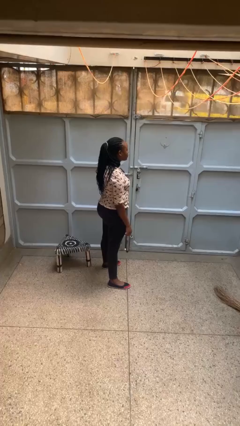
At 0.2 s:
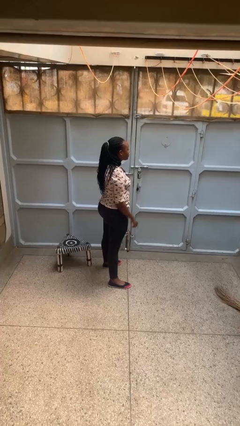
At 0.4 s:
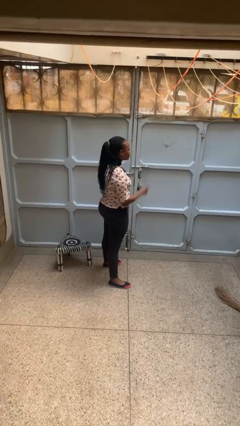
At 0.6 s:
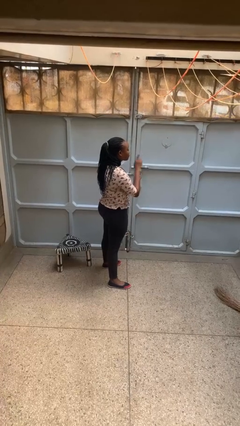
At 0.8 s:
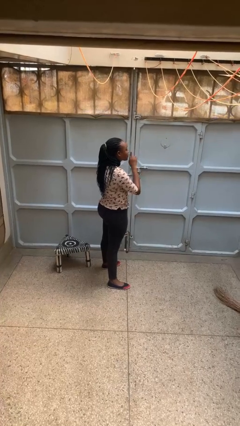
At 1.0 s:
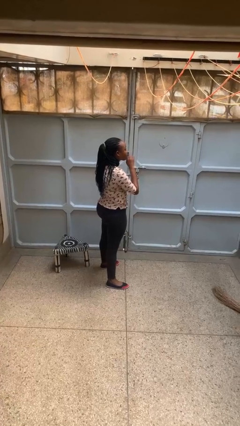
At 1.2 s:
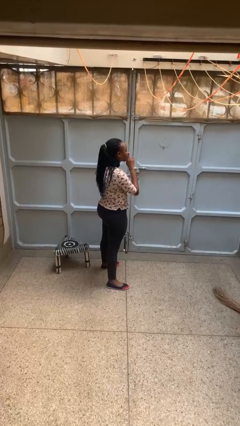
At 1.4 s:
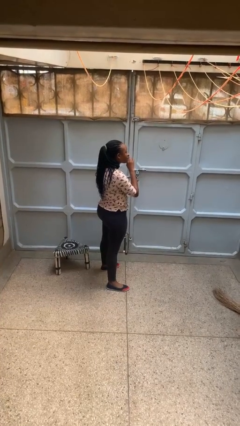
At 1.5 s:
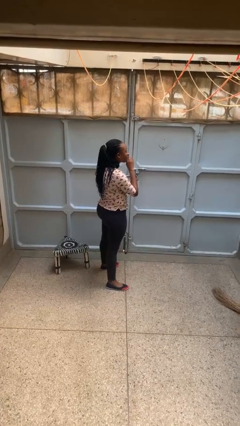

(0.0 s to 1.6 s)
person gestures be quiet

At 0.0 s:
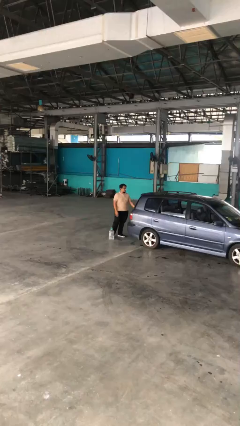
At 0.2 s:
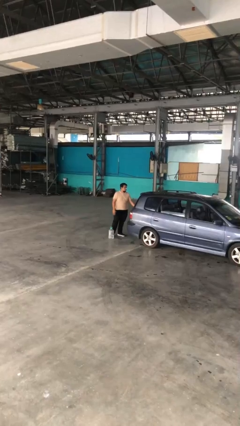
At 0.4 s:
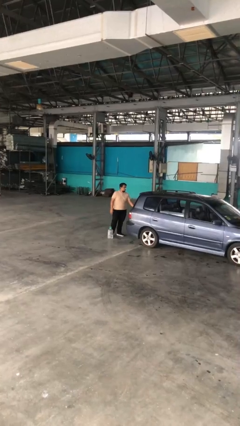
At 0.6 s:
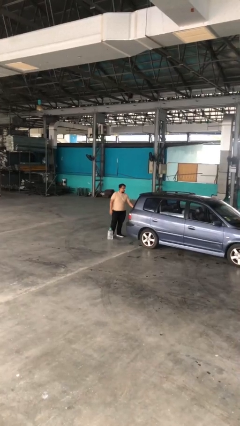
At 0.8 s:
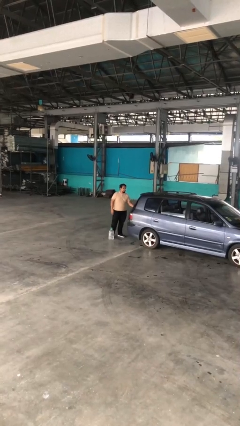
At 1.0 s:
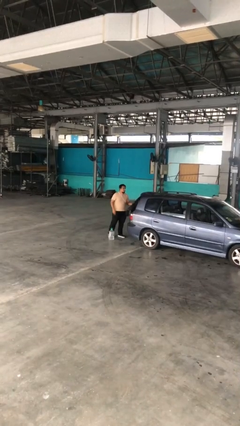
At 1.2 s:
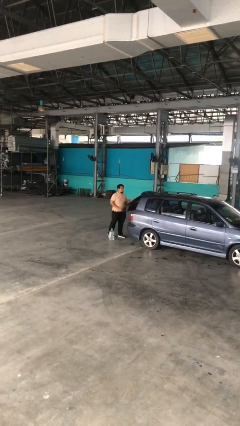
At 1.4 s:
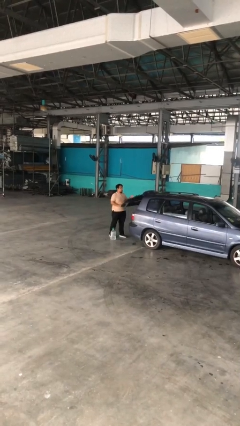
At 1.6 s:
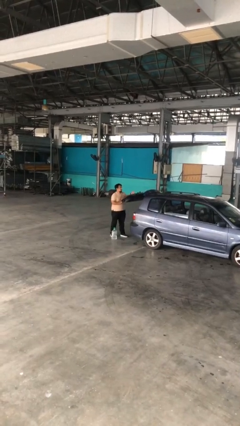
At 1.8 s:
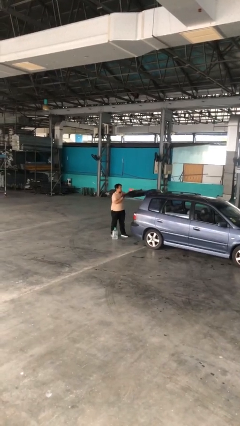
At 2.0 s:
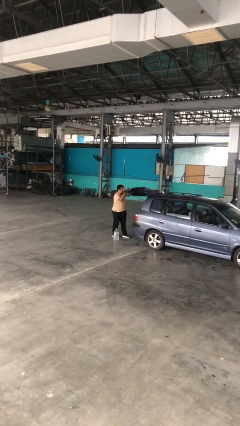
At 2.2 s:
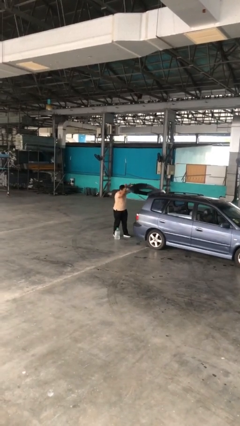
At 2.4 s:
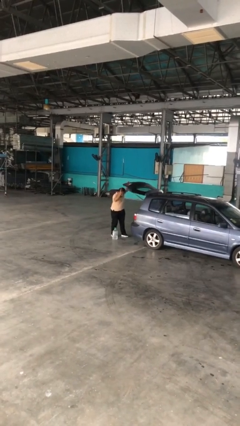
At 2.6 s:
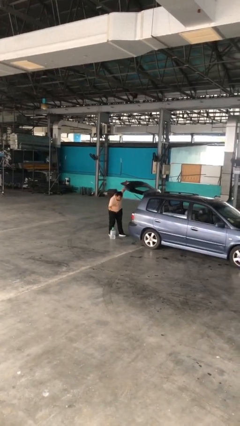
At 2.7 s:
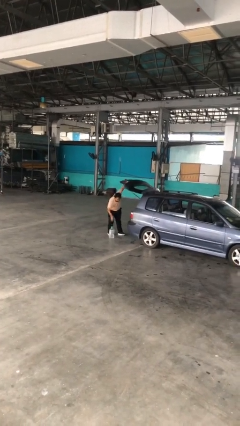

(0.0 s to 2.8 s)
person opens car trunk

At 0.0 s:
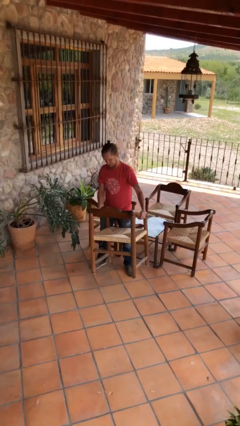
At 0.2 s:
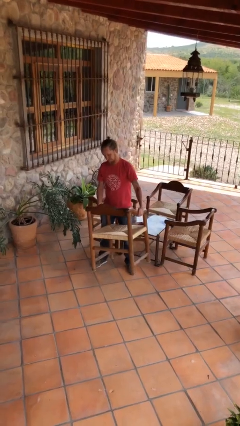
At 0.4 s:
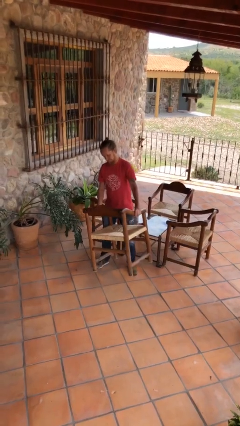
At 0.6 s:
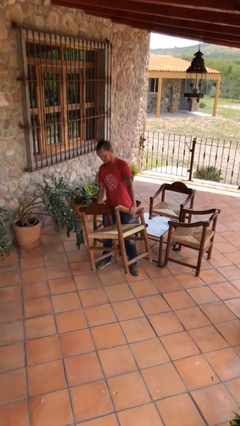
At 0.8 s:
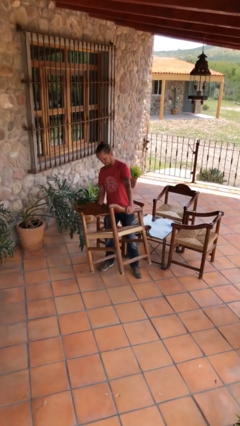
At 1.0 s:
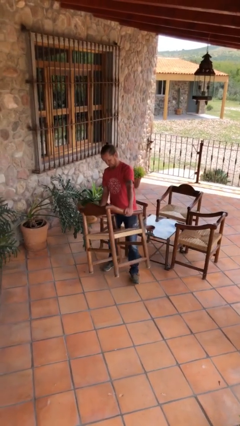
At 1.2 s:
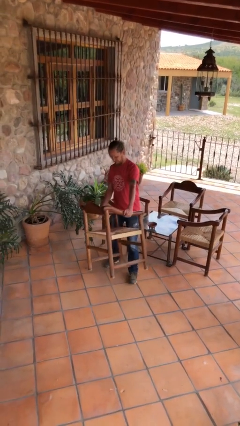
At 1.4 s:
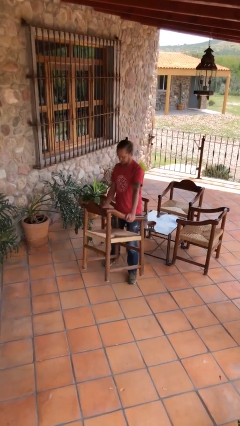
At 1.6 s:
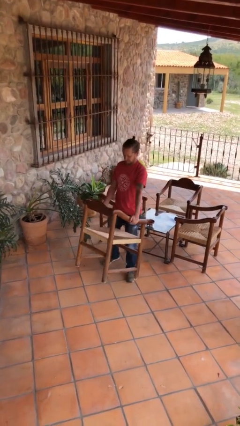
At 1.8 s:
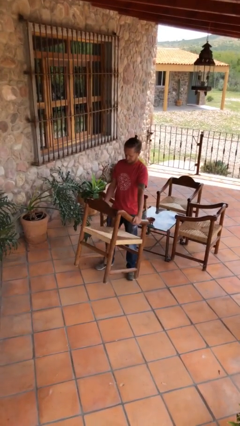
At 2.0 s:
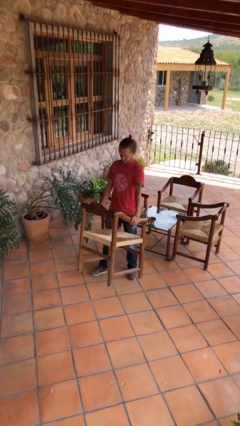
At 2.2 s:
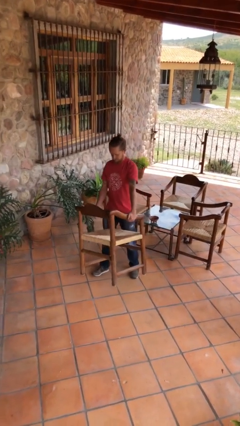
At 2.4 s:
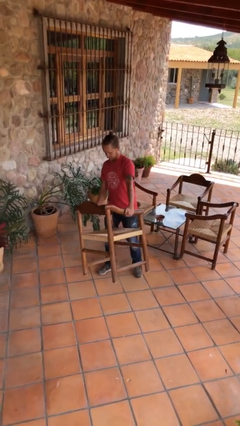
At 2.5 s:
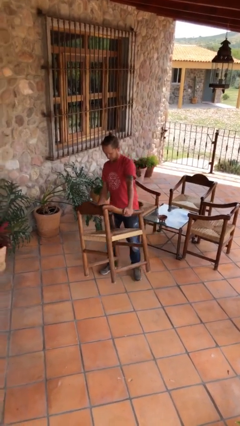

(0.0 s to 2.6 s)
person carries heavy object

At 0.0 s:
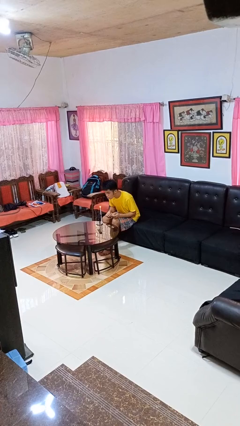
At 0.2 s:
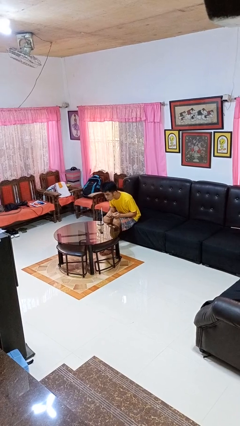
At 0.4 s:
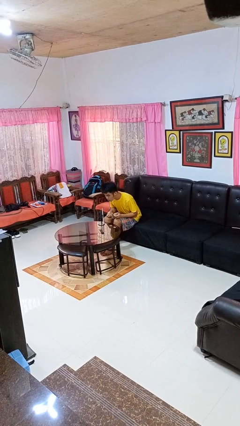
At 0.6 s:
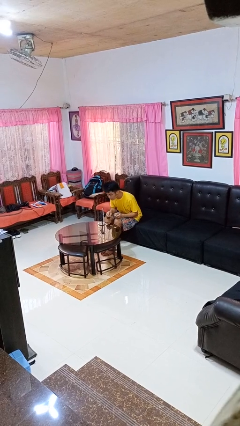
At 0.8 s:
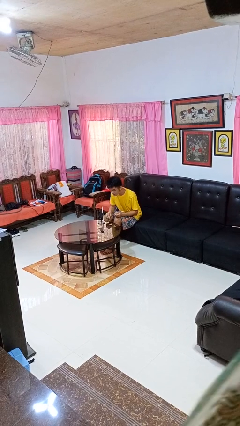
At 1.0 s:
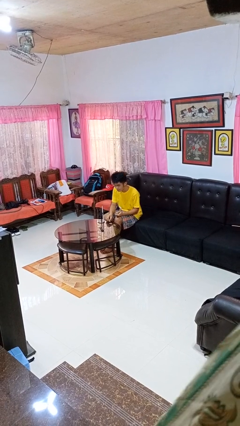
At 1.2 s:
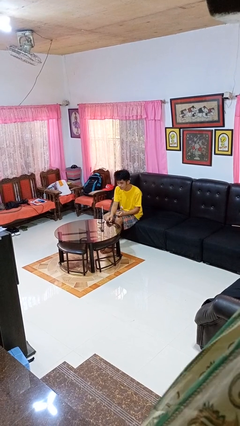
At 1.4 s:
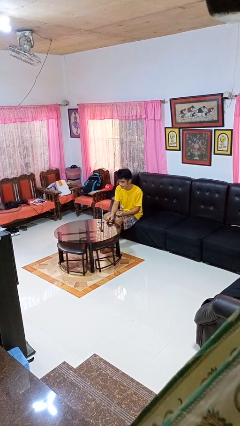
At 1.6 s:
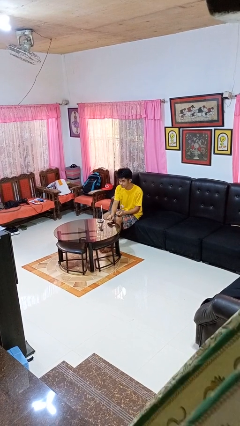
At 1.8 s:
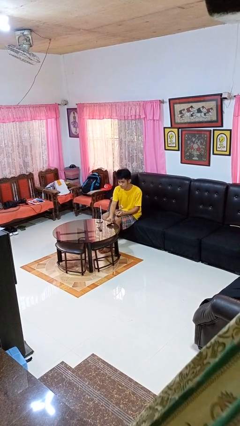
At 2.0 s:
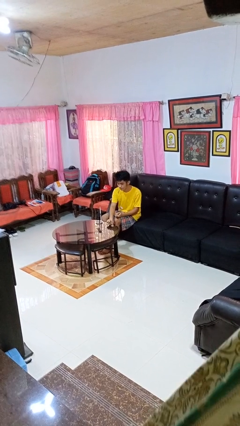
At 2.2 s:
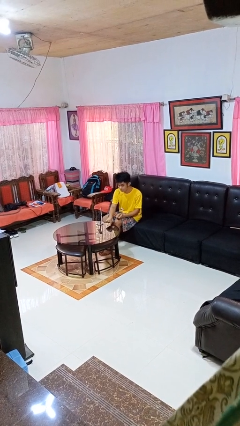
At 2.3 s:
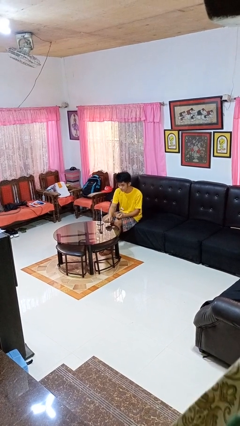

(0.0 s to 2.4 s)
person extinguishes candle

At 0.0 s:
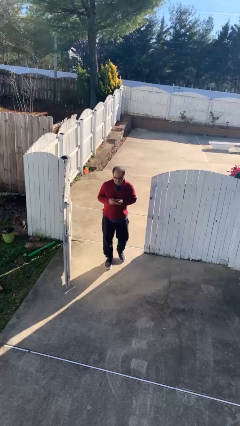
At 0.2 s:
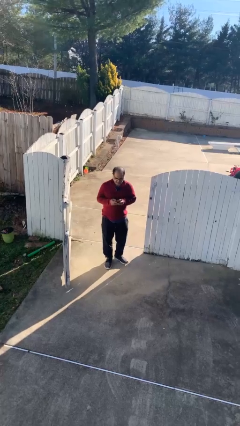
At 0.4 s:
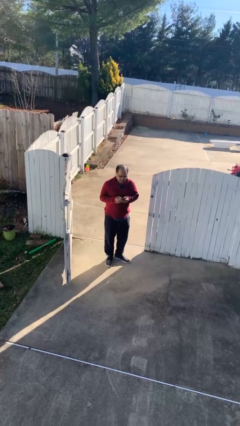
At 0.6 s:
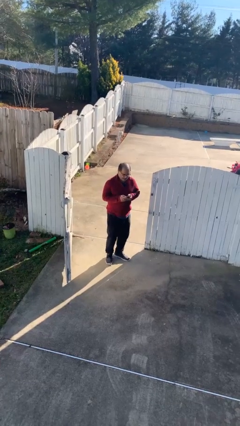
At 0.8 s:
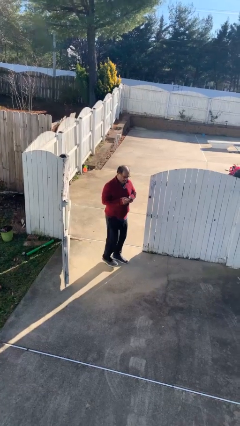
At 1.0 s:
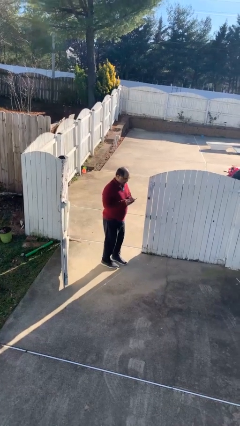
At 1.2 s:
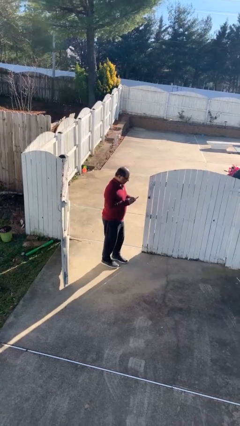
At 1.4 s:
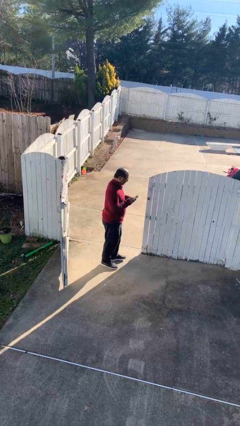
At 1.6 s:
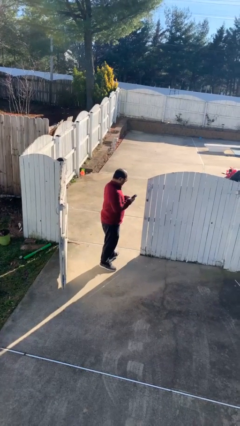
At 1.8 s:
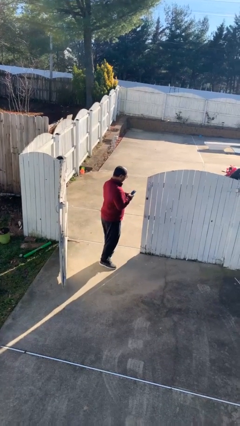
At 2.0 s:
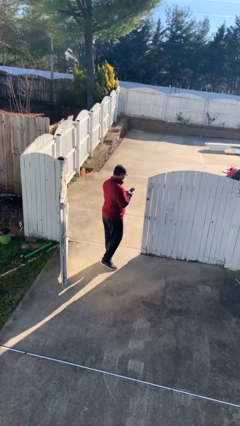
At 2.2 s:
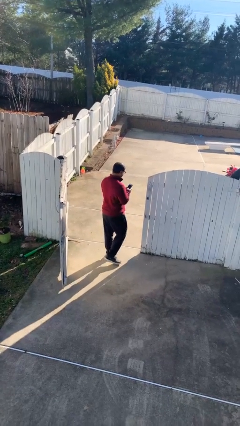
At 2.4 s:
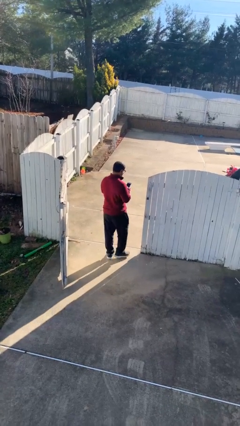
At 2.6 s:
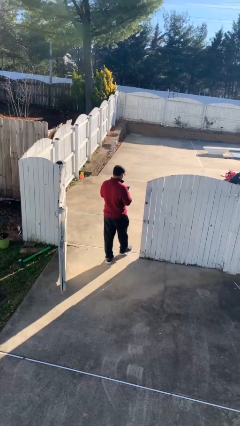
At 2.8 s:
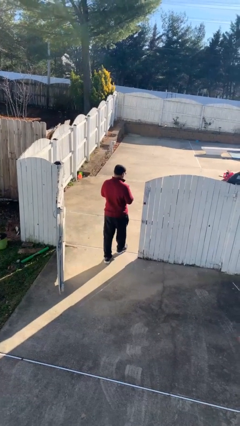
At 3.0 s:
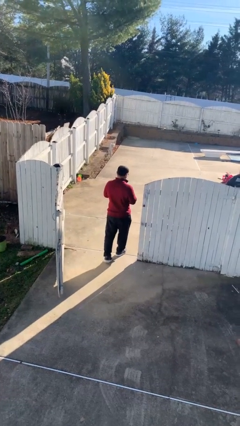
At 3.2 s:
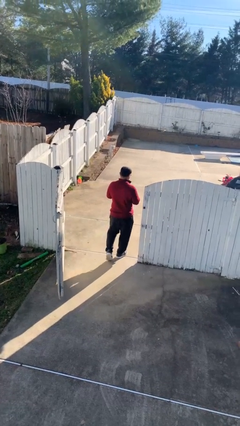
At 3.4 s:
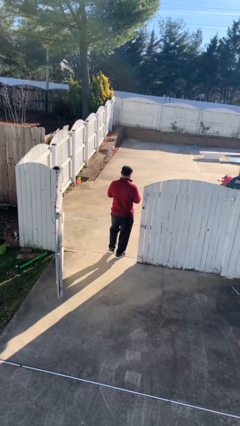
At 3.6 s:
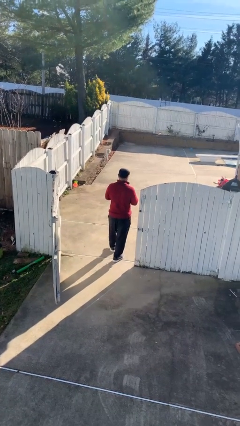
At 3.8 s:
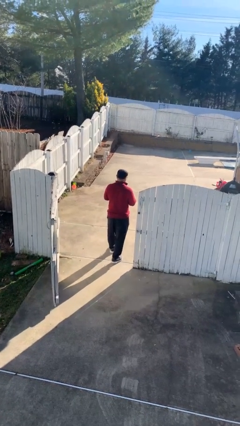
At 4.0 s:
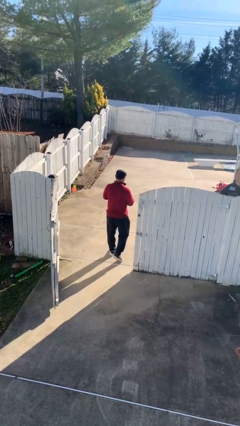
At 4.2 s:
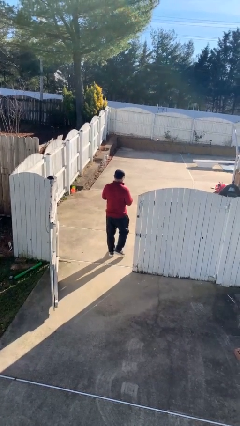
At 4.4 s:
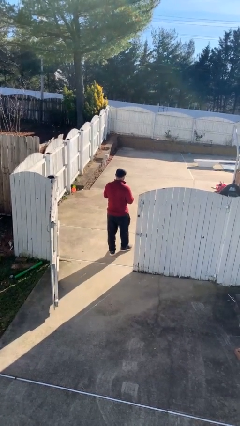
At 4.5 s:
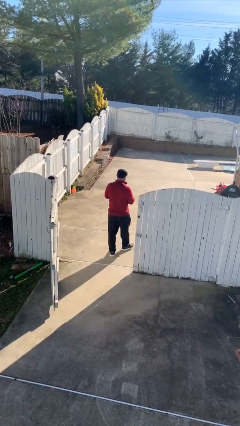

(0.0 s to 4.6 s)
person exits scene through structure

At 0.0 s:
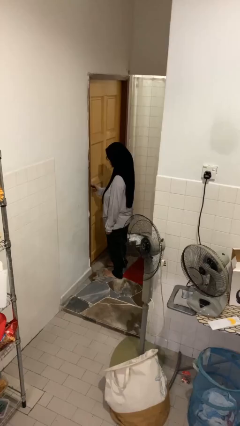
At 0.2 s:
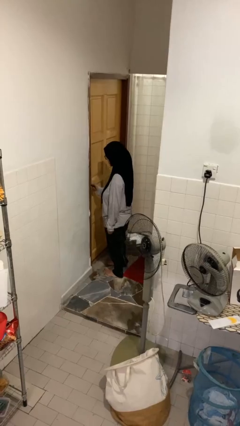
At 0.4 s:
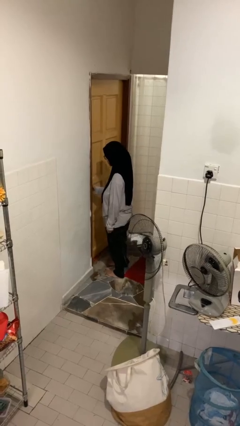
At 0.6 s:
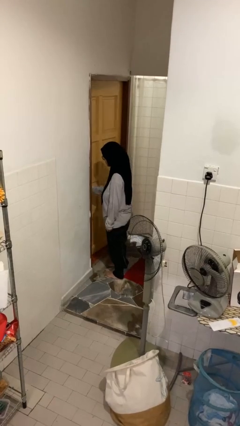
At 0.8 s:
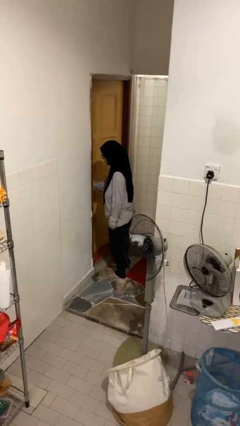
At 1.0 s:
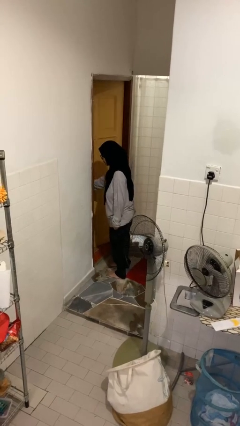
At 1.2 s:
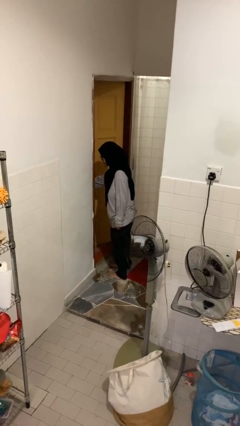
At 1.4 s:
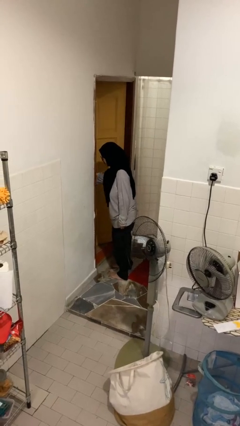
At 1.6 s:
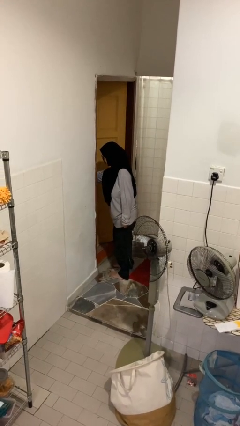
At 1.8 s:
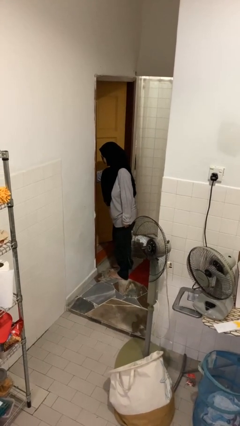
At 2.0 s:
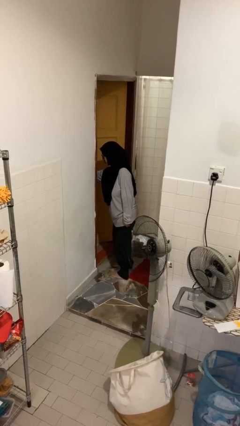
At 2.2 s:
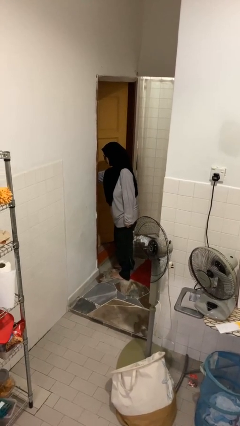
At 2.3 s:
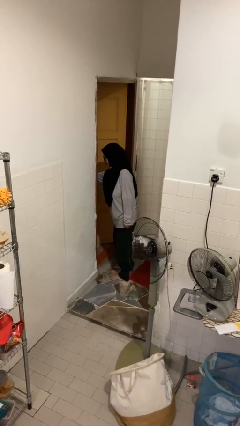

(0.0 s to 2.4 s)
person opens facility door

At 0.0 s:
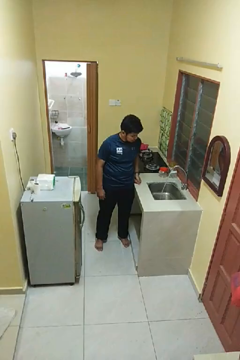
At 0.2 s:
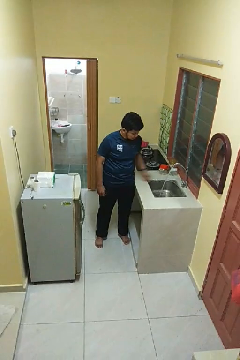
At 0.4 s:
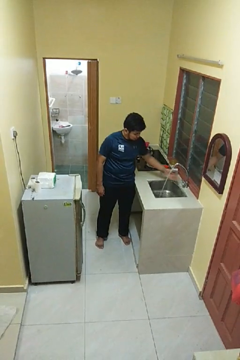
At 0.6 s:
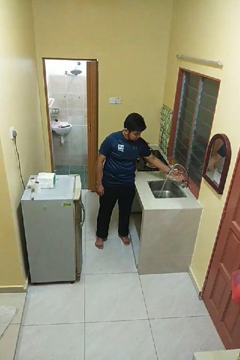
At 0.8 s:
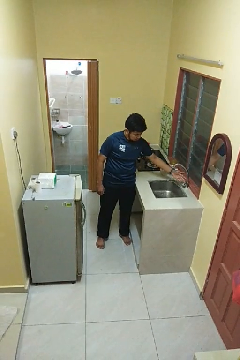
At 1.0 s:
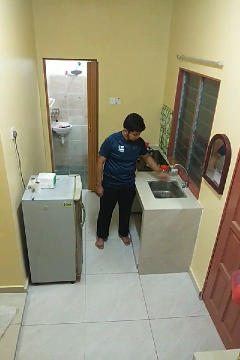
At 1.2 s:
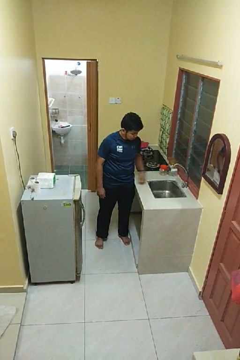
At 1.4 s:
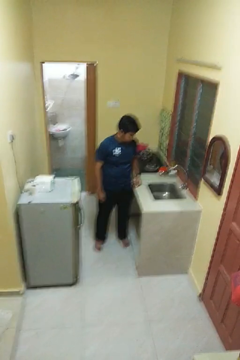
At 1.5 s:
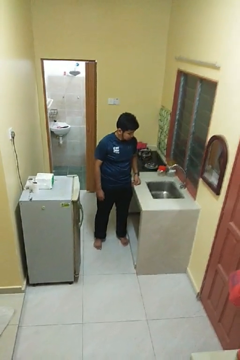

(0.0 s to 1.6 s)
person turns off faucet
